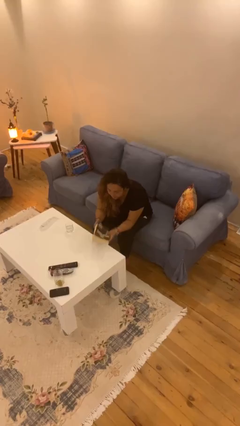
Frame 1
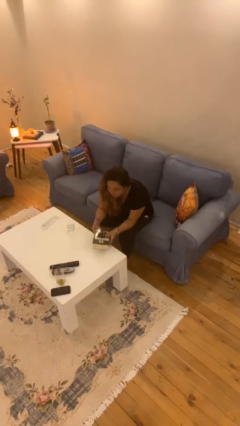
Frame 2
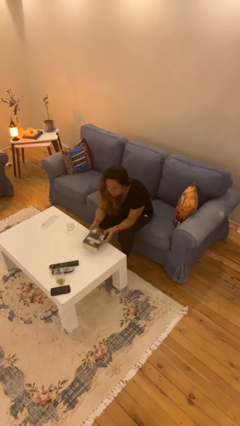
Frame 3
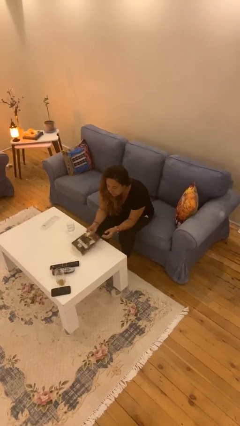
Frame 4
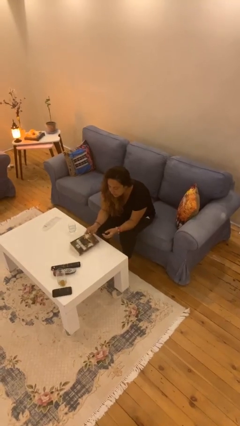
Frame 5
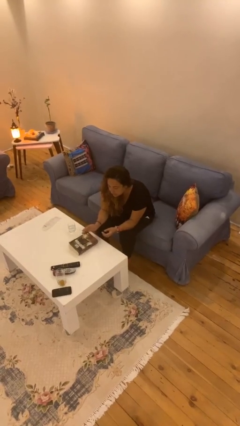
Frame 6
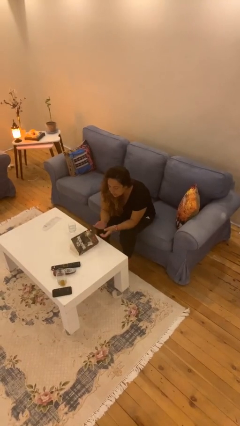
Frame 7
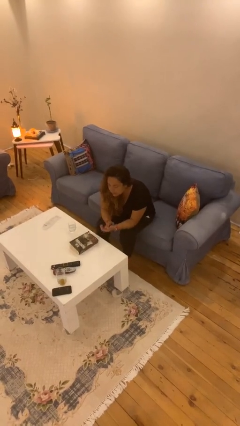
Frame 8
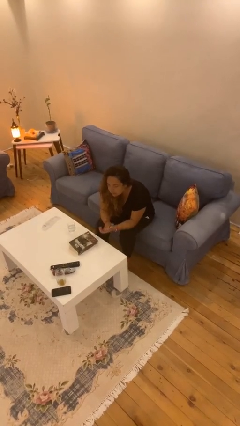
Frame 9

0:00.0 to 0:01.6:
person puts down object on table

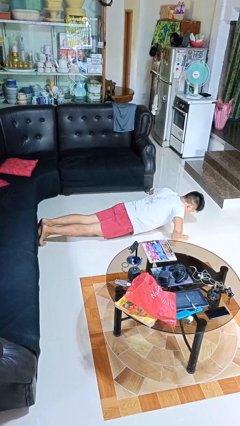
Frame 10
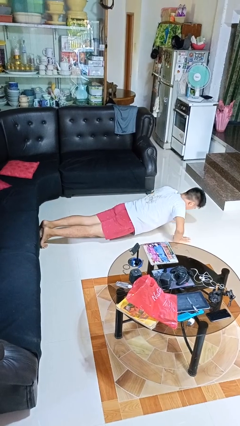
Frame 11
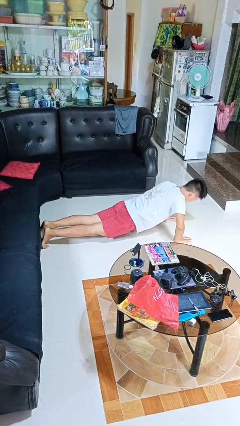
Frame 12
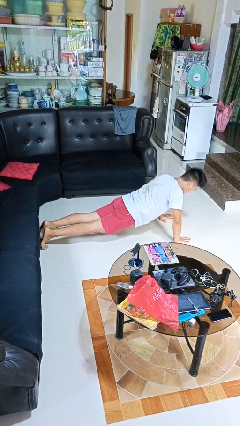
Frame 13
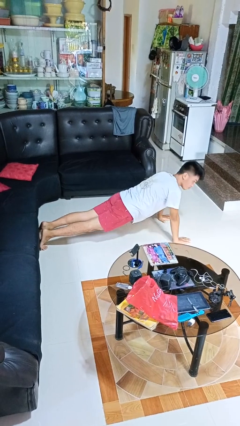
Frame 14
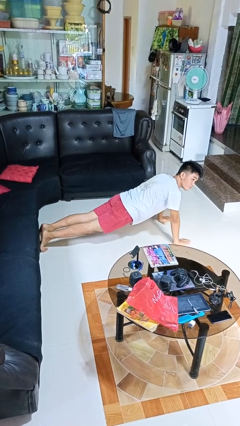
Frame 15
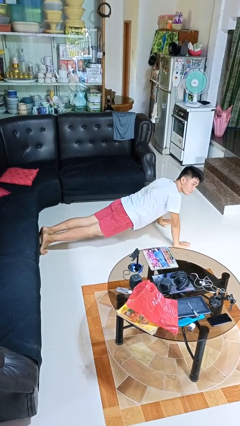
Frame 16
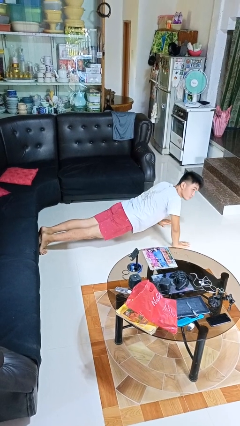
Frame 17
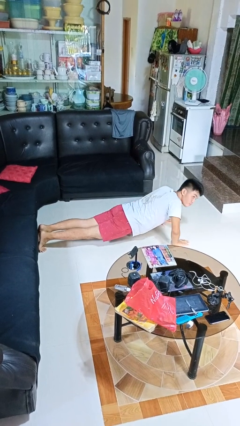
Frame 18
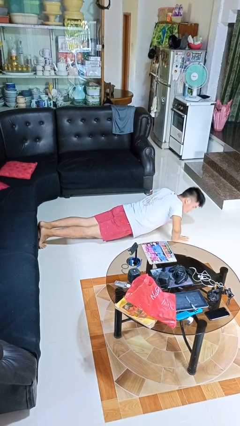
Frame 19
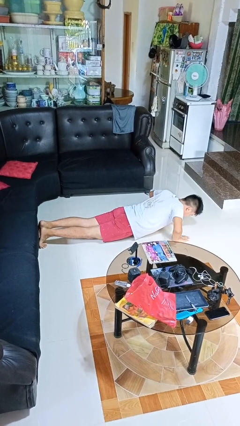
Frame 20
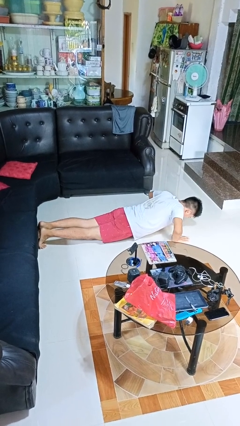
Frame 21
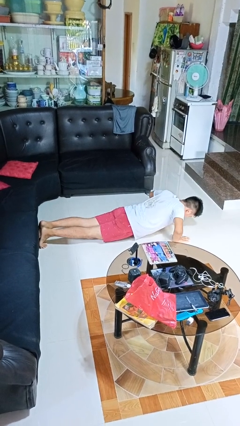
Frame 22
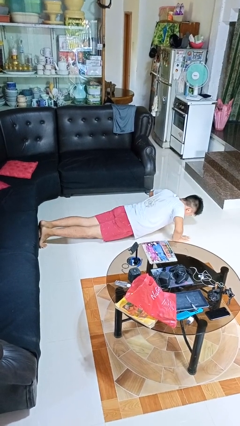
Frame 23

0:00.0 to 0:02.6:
person exercises with pushup

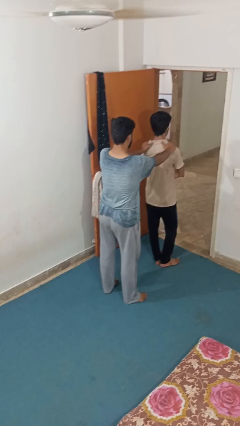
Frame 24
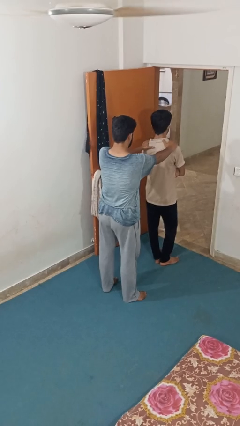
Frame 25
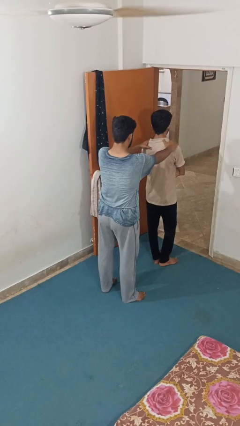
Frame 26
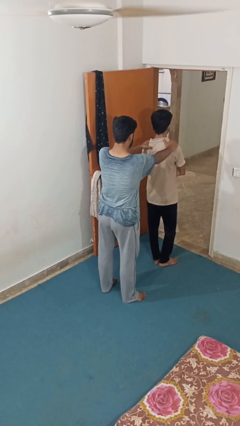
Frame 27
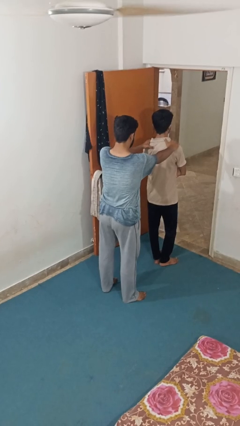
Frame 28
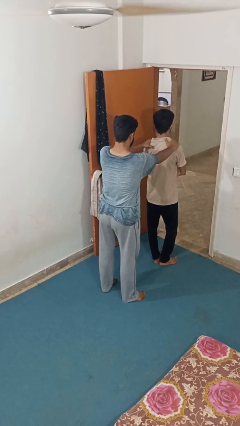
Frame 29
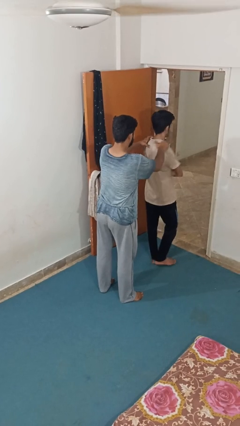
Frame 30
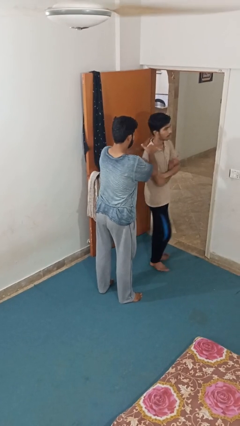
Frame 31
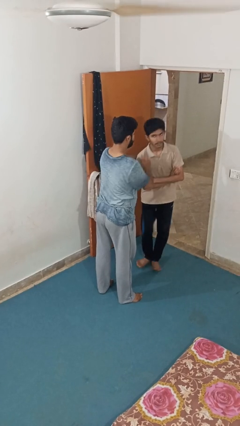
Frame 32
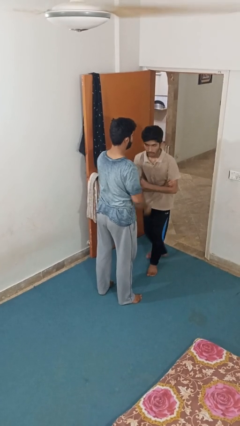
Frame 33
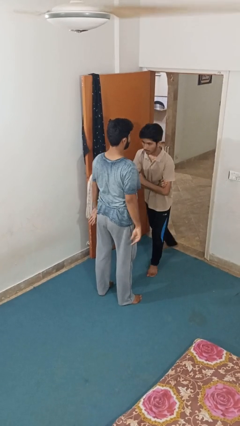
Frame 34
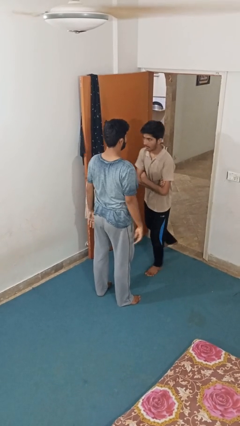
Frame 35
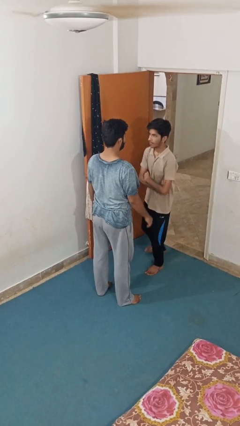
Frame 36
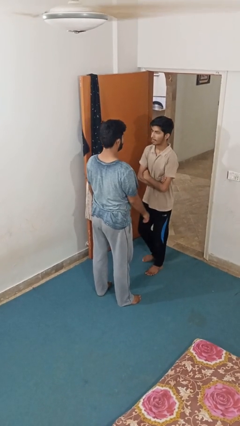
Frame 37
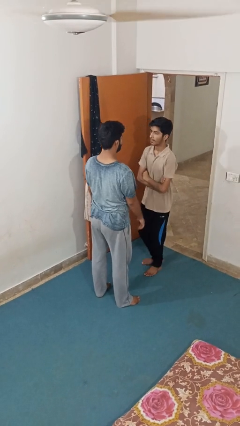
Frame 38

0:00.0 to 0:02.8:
person spins person around

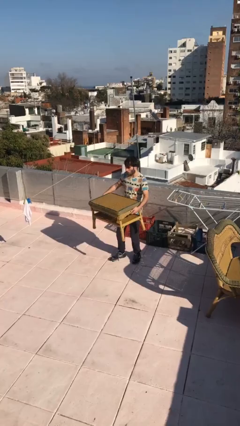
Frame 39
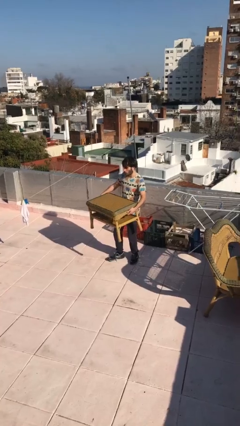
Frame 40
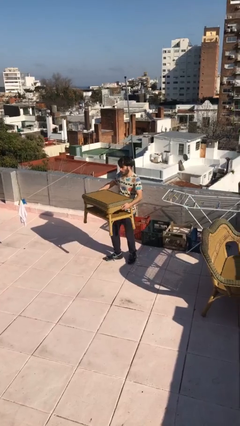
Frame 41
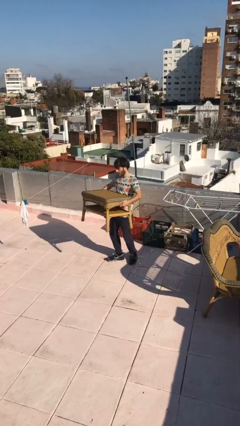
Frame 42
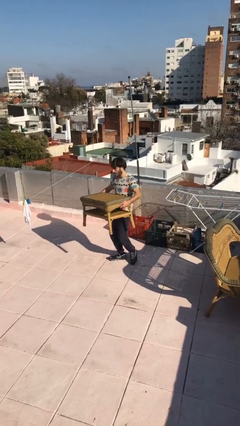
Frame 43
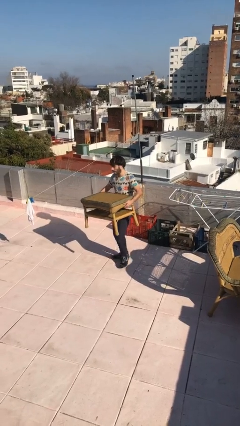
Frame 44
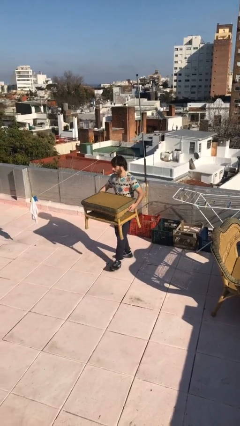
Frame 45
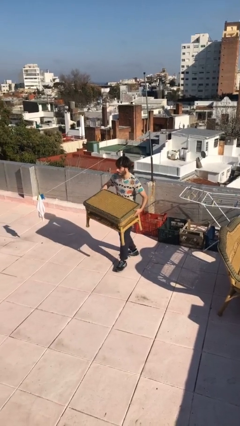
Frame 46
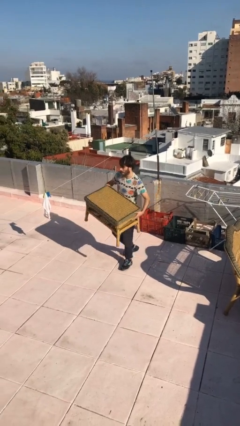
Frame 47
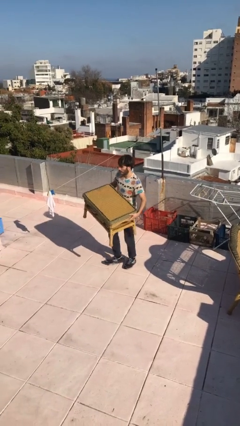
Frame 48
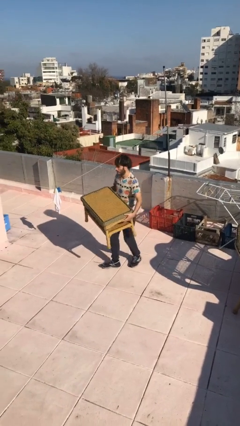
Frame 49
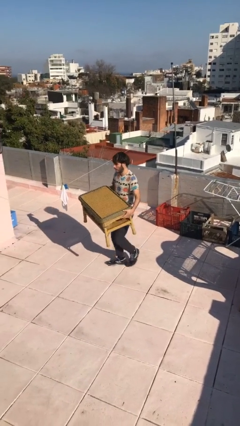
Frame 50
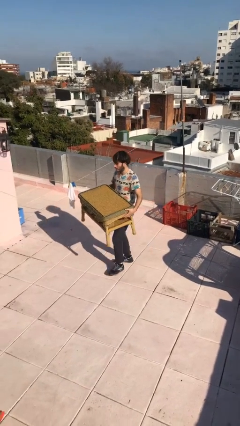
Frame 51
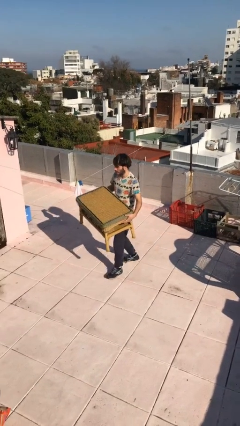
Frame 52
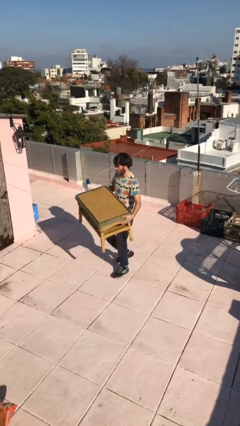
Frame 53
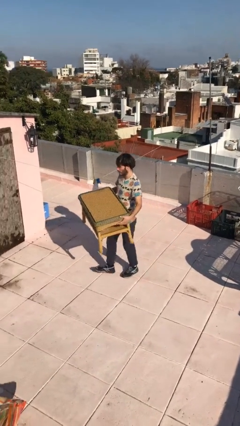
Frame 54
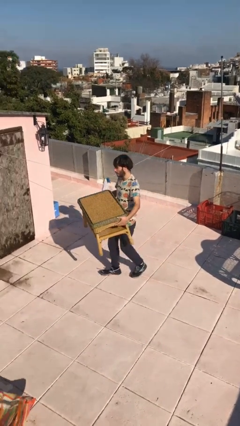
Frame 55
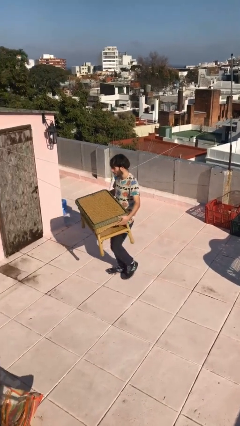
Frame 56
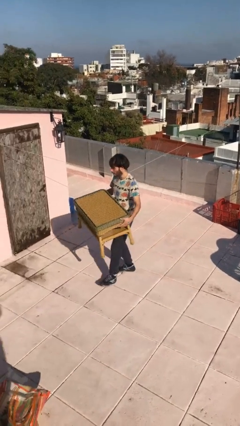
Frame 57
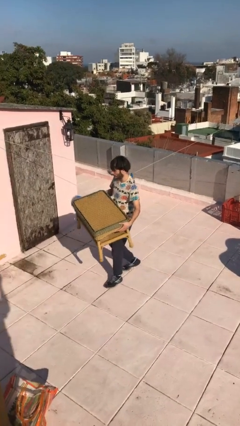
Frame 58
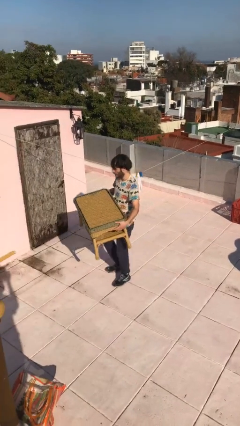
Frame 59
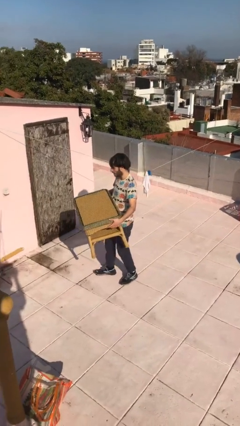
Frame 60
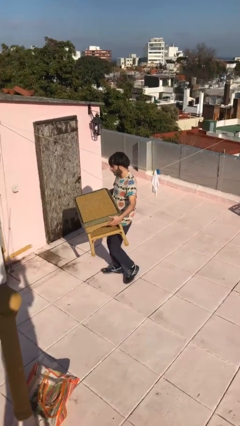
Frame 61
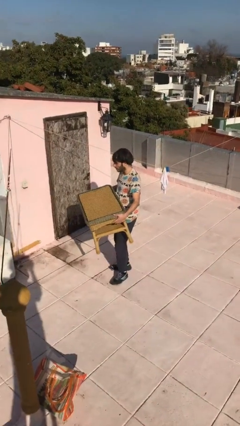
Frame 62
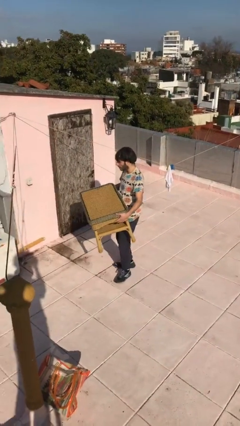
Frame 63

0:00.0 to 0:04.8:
person carries furniture

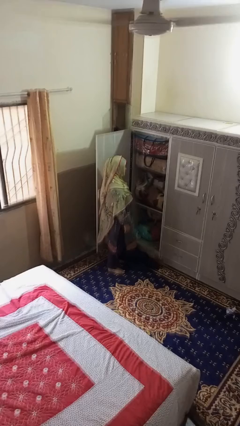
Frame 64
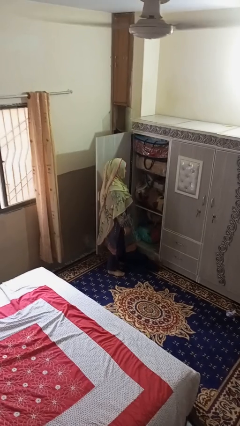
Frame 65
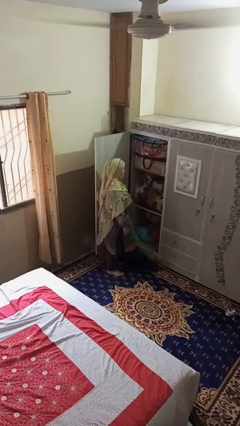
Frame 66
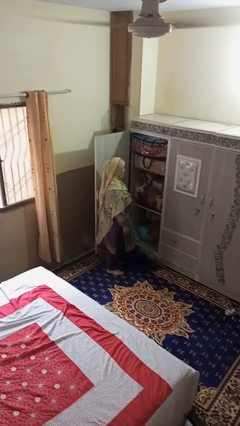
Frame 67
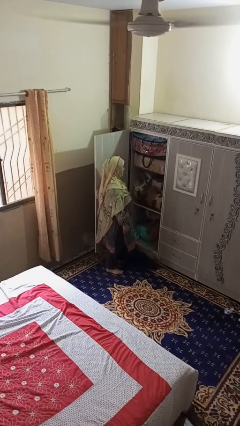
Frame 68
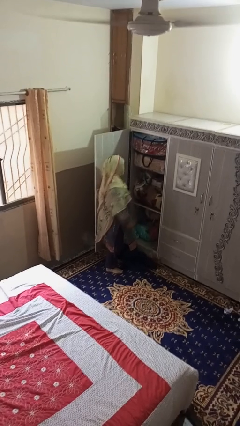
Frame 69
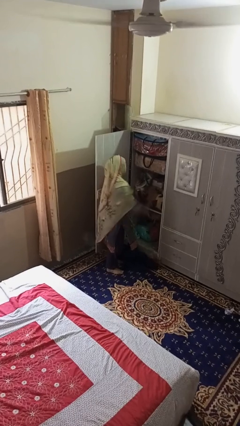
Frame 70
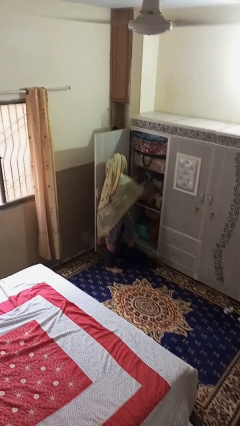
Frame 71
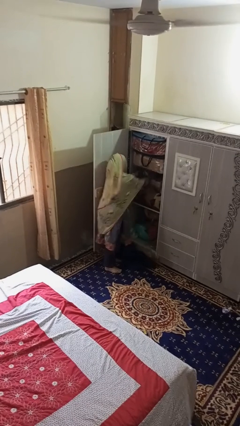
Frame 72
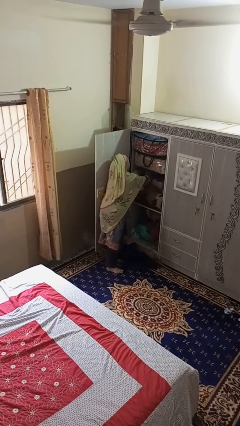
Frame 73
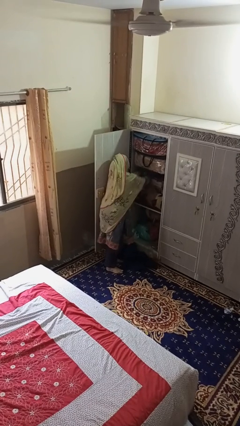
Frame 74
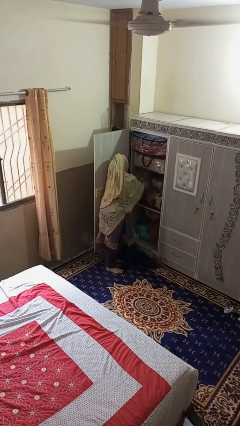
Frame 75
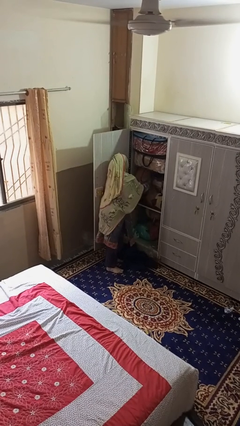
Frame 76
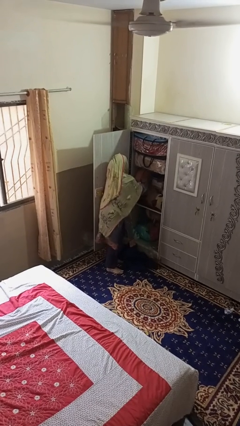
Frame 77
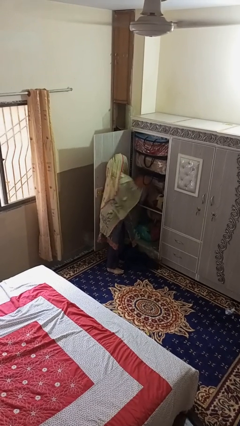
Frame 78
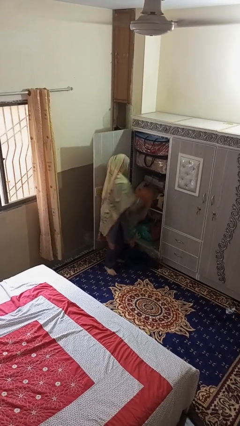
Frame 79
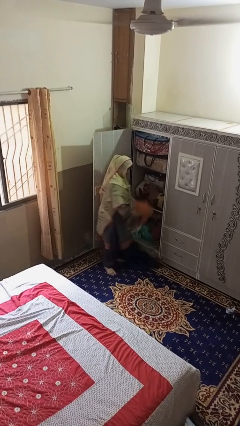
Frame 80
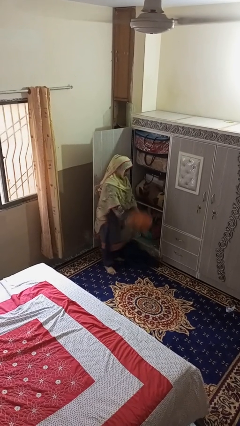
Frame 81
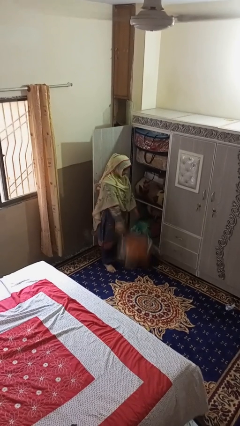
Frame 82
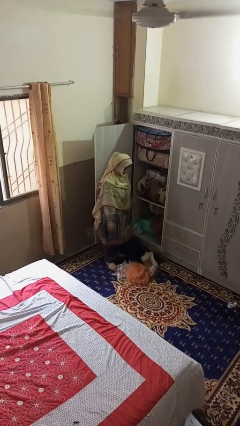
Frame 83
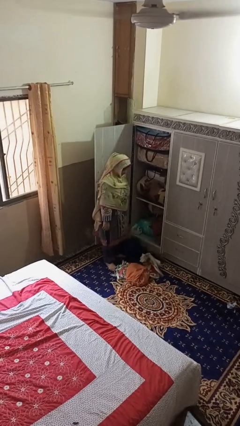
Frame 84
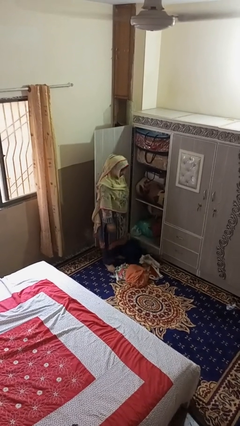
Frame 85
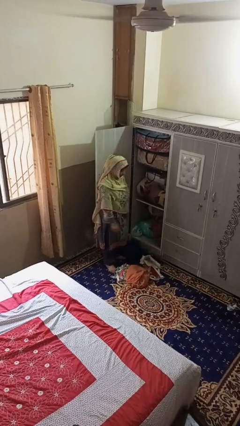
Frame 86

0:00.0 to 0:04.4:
person puts clothes into dresser

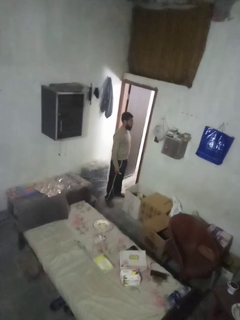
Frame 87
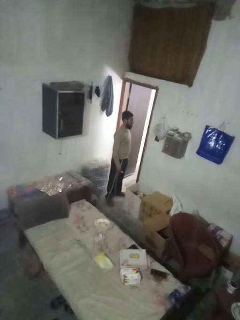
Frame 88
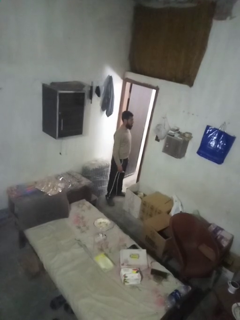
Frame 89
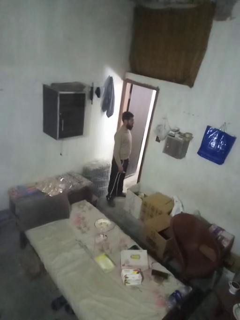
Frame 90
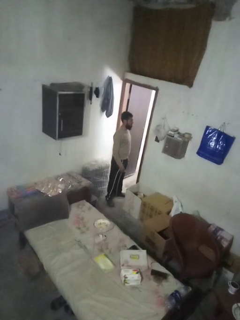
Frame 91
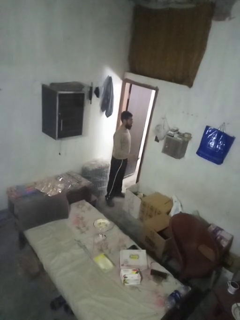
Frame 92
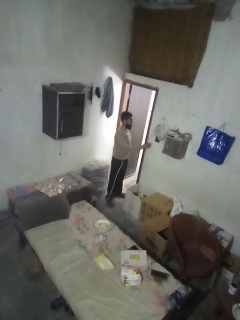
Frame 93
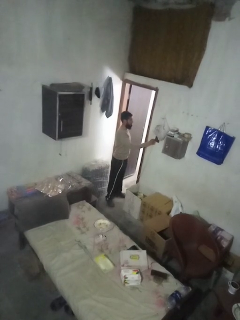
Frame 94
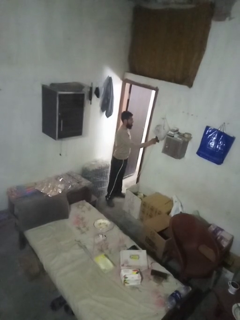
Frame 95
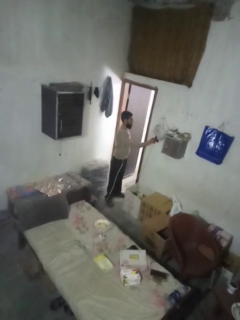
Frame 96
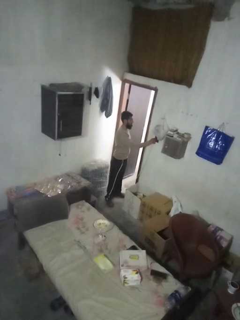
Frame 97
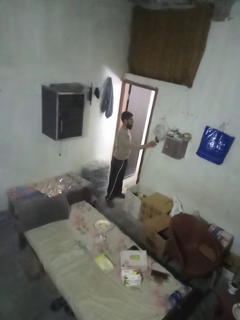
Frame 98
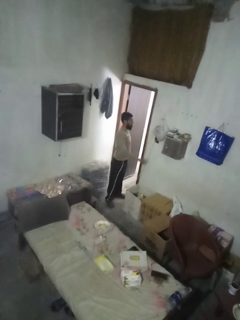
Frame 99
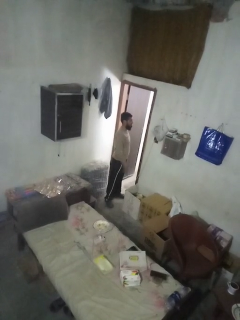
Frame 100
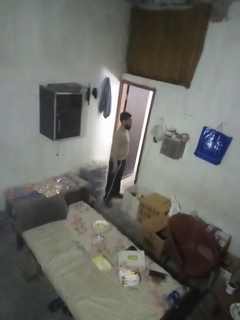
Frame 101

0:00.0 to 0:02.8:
person plugs into electrical socket
